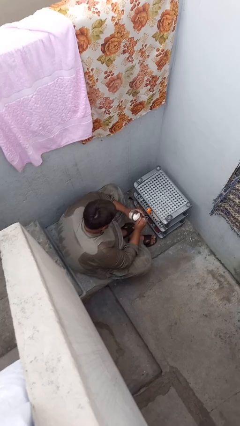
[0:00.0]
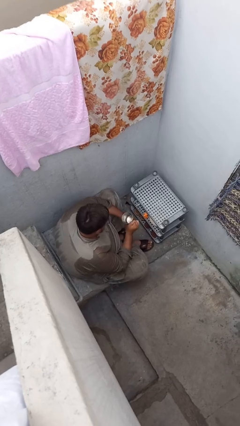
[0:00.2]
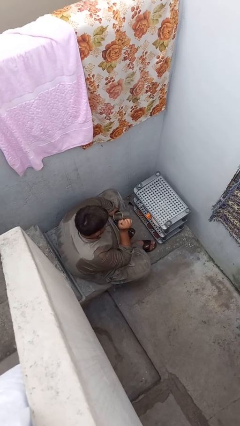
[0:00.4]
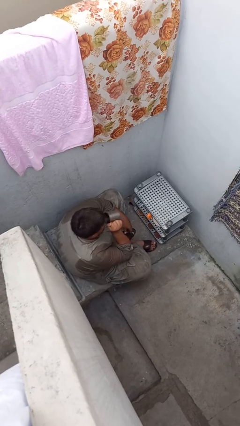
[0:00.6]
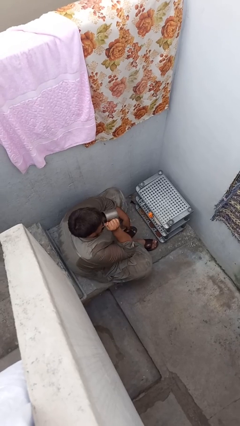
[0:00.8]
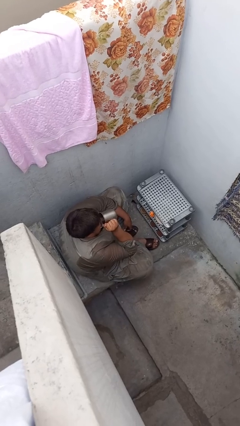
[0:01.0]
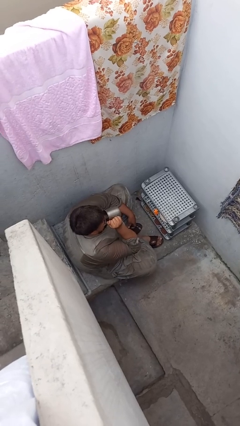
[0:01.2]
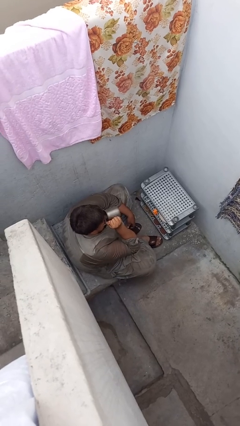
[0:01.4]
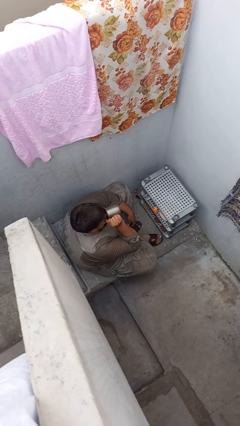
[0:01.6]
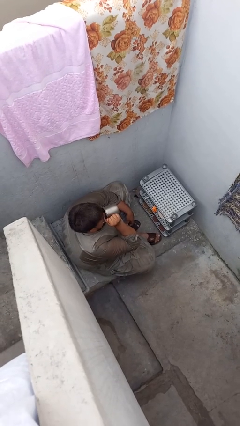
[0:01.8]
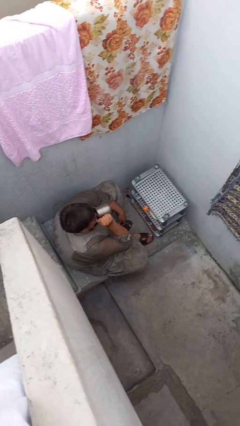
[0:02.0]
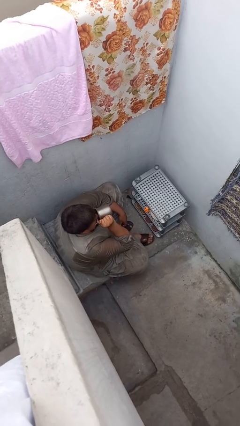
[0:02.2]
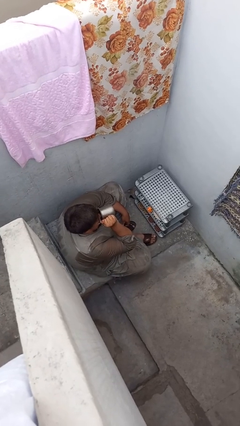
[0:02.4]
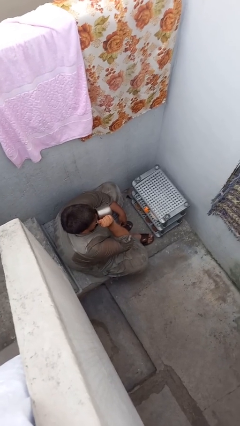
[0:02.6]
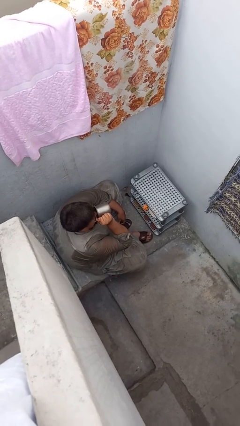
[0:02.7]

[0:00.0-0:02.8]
person drinks from mug

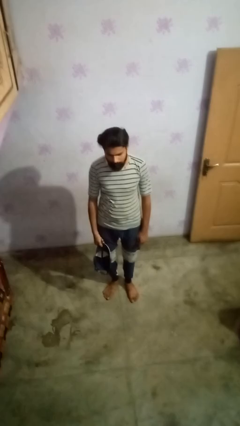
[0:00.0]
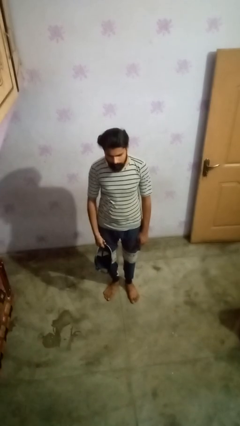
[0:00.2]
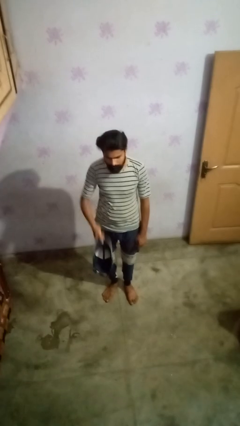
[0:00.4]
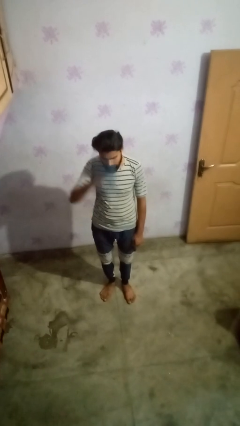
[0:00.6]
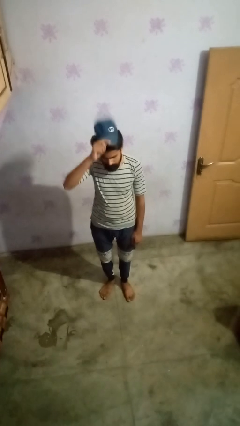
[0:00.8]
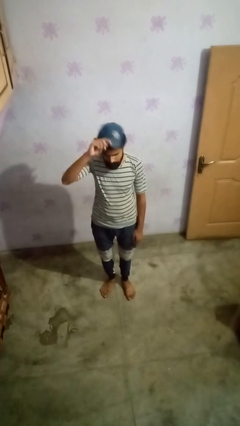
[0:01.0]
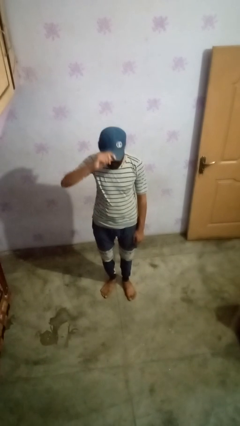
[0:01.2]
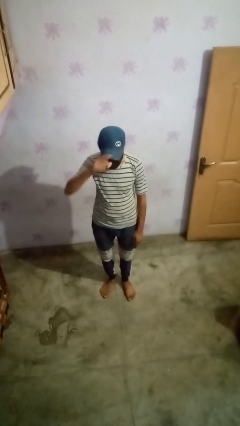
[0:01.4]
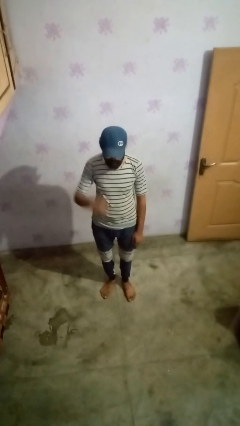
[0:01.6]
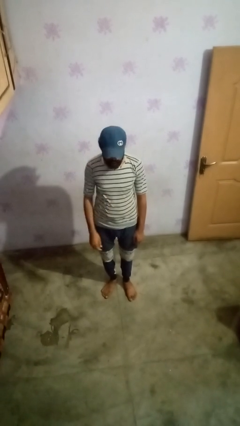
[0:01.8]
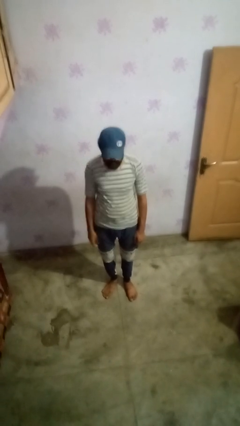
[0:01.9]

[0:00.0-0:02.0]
person puts on hat

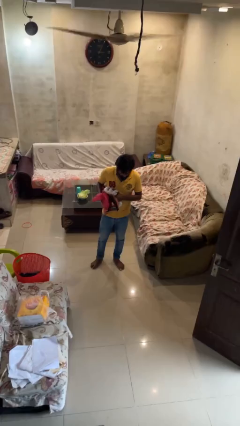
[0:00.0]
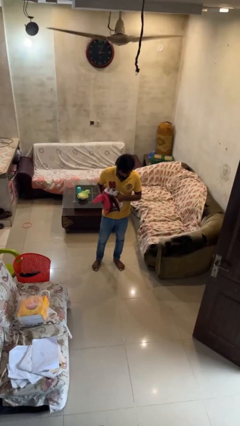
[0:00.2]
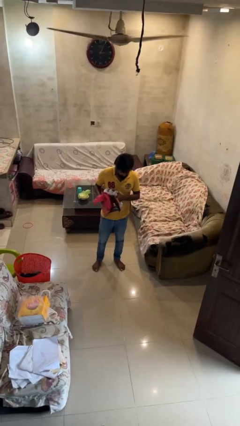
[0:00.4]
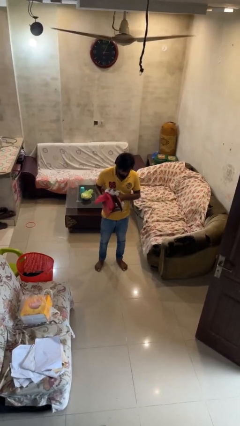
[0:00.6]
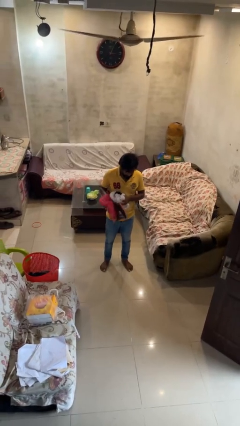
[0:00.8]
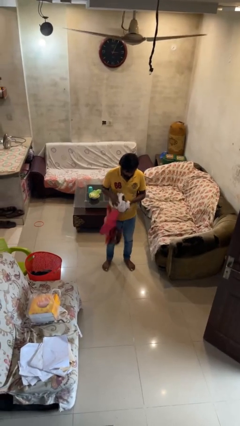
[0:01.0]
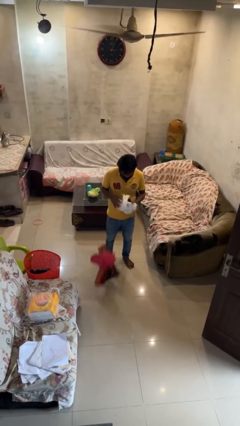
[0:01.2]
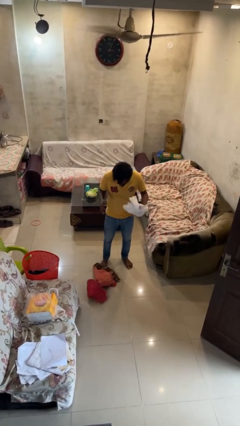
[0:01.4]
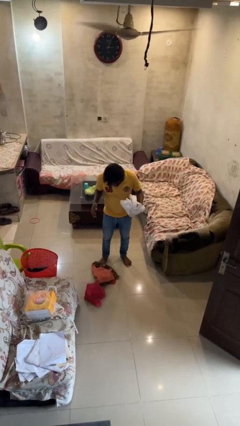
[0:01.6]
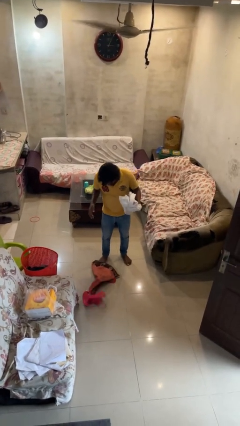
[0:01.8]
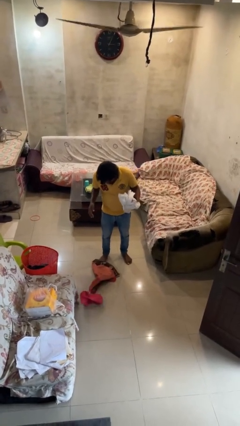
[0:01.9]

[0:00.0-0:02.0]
person drops object

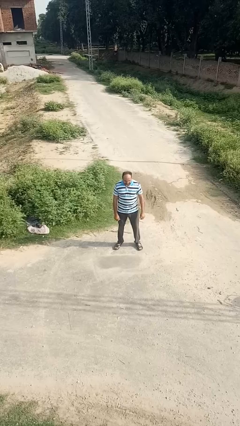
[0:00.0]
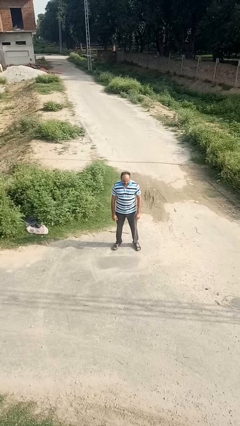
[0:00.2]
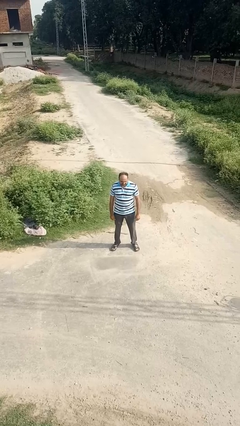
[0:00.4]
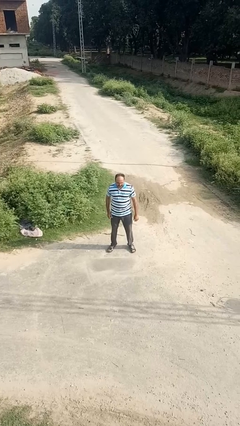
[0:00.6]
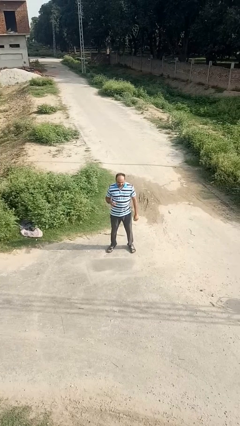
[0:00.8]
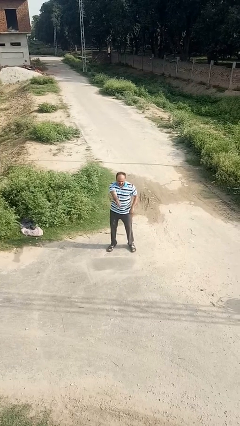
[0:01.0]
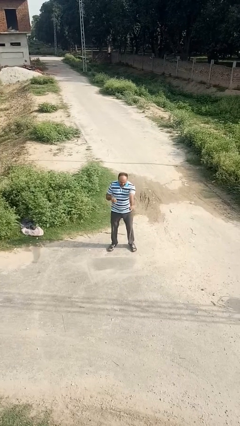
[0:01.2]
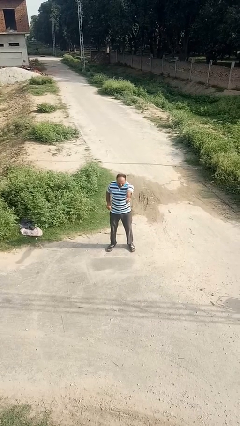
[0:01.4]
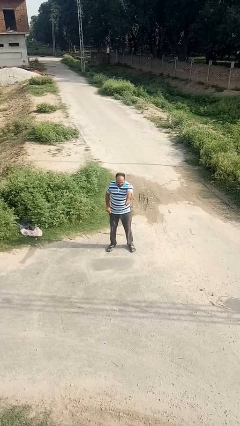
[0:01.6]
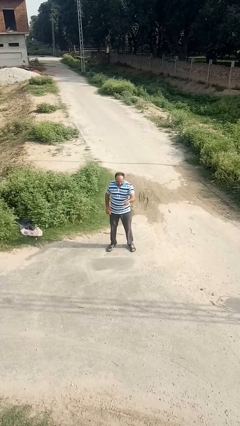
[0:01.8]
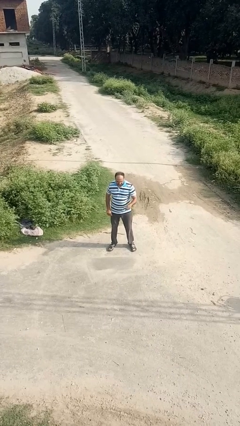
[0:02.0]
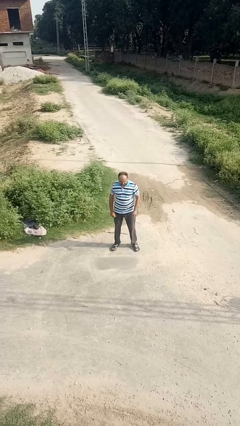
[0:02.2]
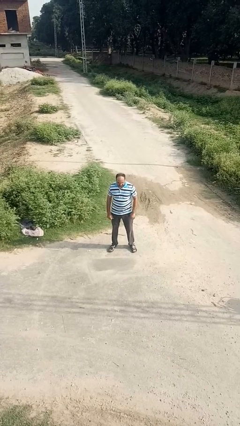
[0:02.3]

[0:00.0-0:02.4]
person punches

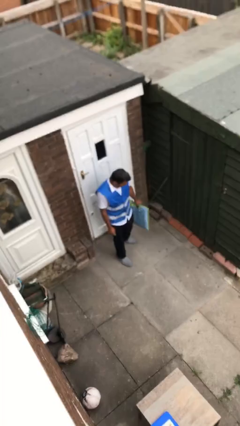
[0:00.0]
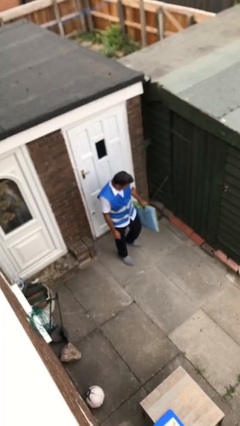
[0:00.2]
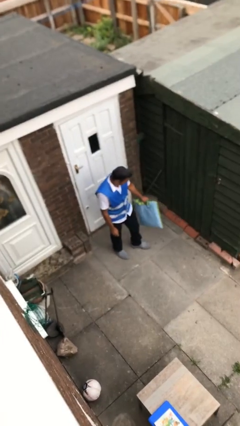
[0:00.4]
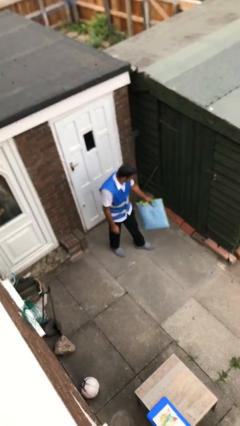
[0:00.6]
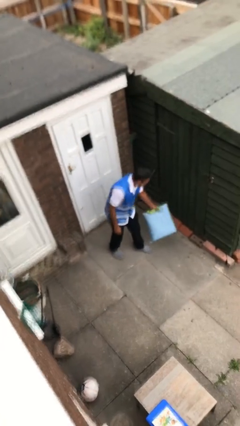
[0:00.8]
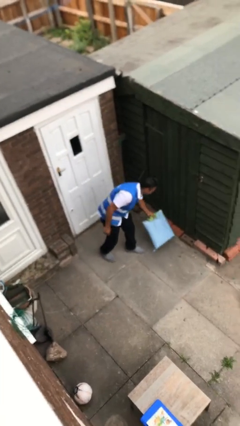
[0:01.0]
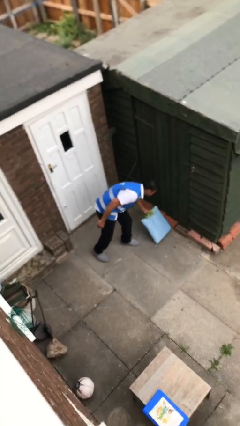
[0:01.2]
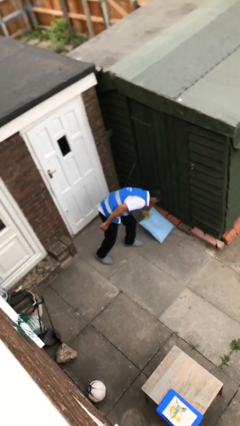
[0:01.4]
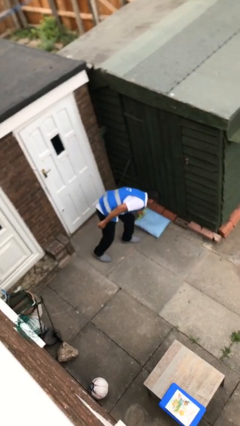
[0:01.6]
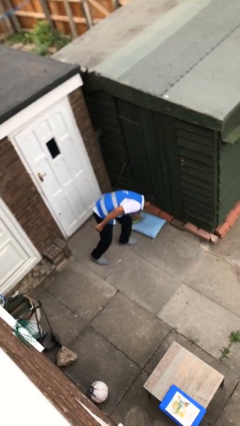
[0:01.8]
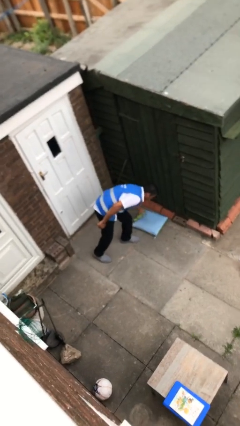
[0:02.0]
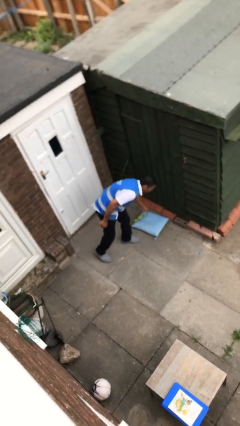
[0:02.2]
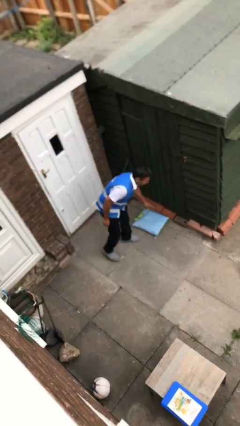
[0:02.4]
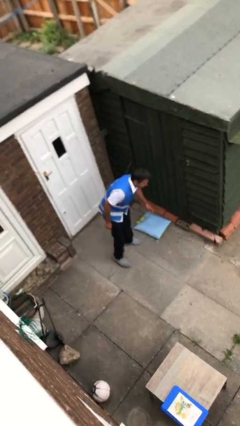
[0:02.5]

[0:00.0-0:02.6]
person puts down object on floor

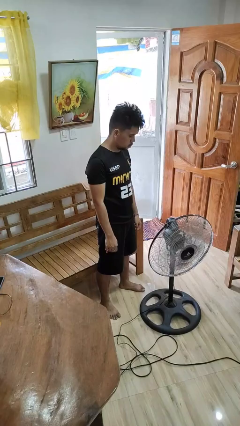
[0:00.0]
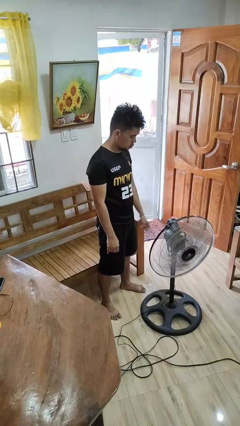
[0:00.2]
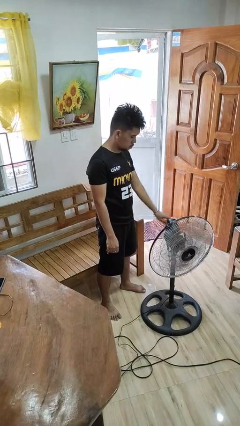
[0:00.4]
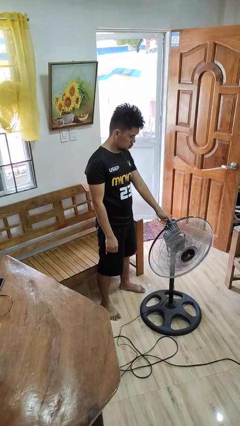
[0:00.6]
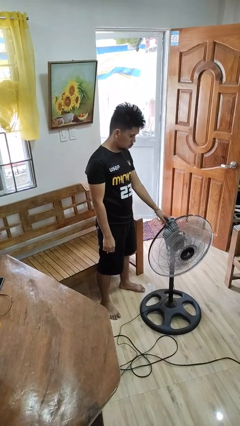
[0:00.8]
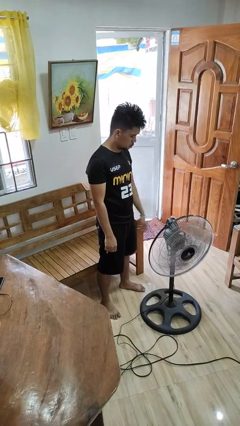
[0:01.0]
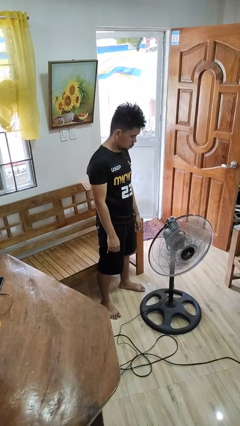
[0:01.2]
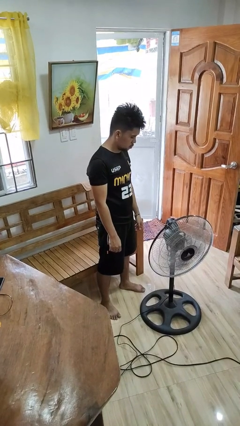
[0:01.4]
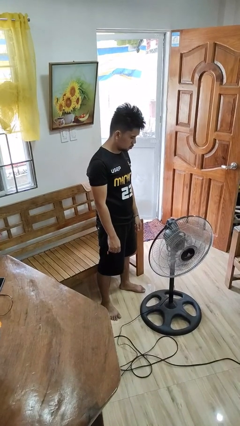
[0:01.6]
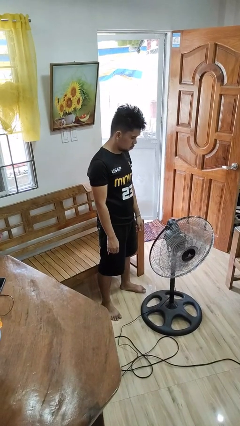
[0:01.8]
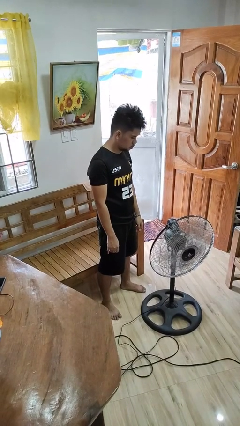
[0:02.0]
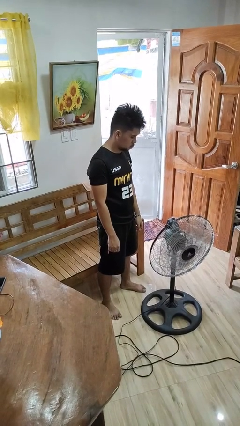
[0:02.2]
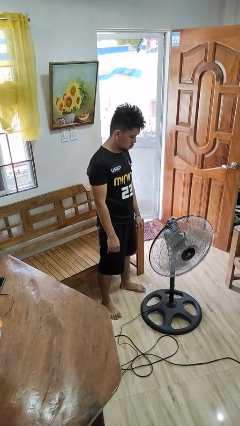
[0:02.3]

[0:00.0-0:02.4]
person turns off fan

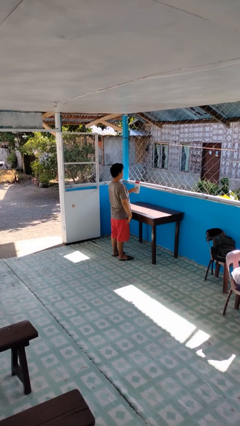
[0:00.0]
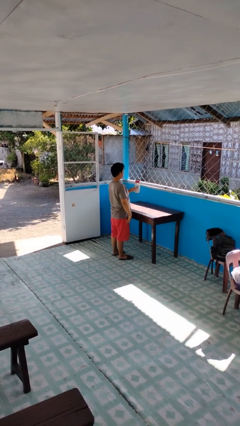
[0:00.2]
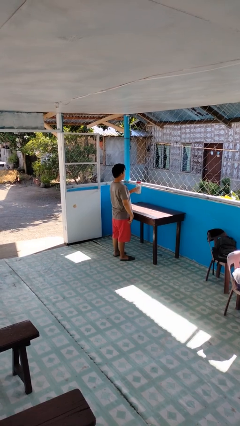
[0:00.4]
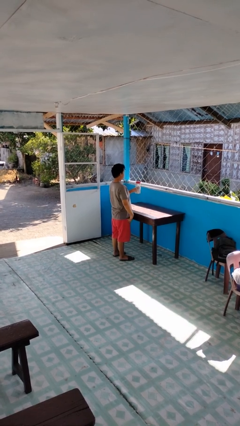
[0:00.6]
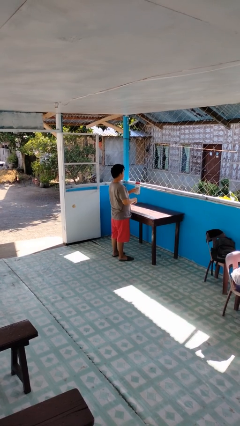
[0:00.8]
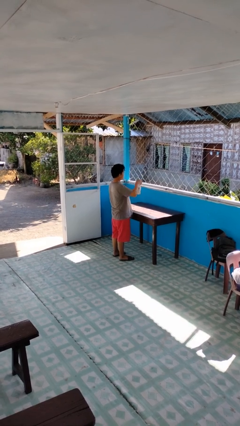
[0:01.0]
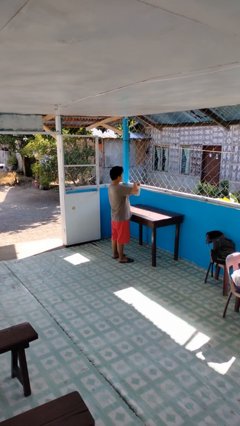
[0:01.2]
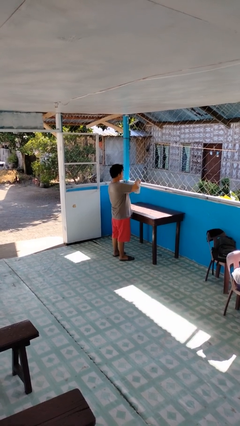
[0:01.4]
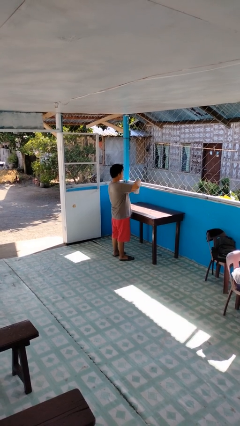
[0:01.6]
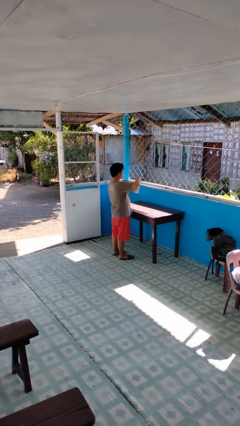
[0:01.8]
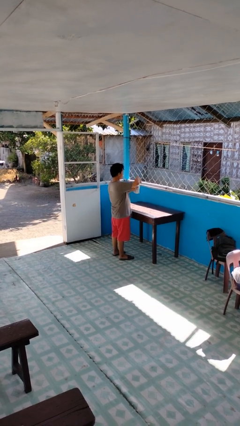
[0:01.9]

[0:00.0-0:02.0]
person opens jar

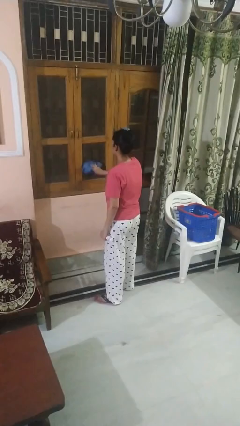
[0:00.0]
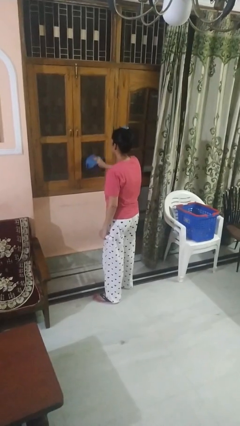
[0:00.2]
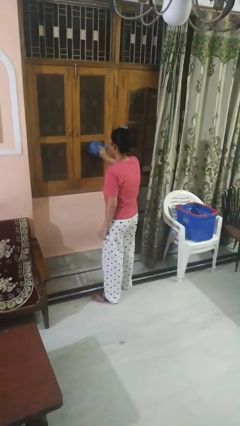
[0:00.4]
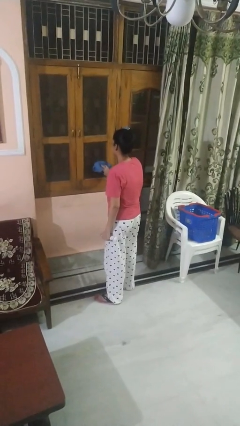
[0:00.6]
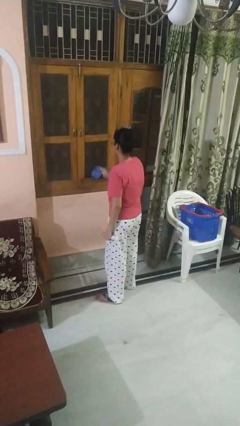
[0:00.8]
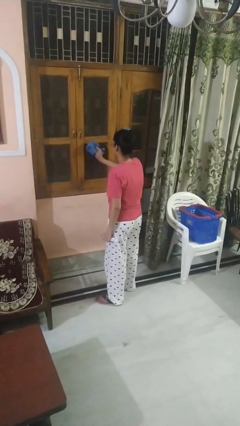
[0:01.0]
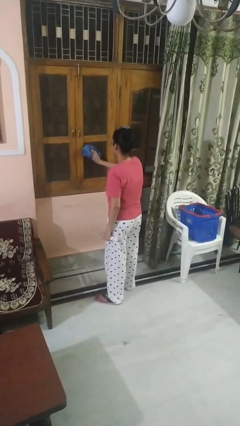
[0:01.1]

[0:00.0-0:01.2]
person washes window
